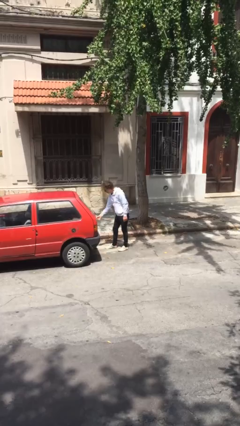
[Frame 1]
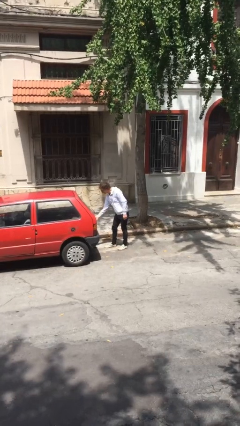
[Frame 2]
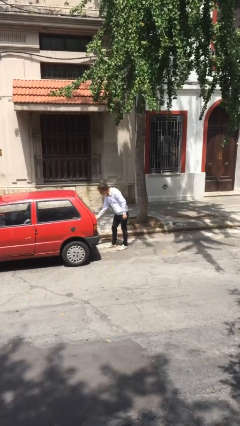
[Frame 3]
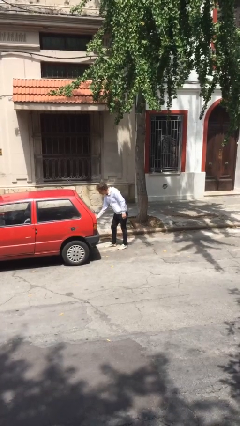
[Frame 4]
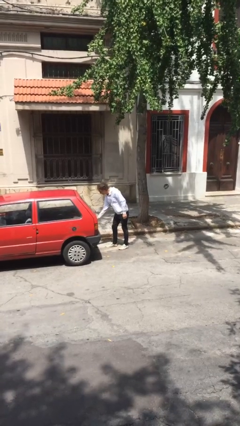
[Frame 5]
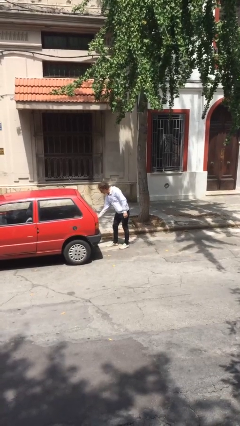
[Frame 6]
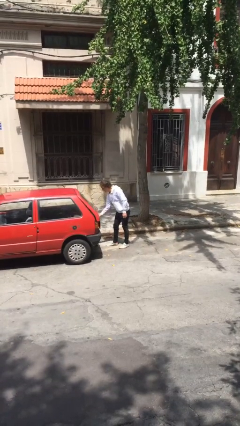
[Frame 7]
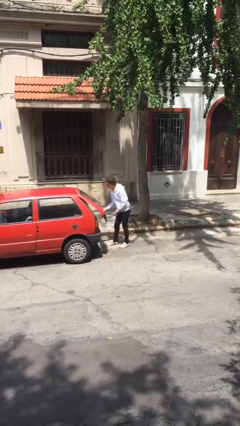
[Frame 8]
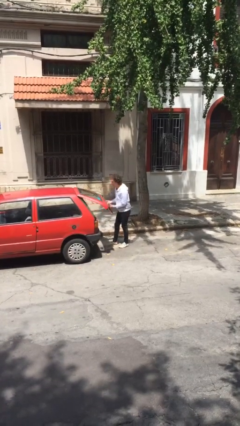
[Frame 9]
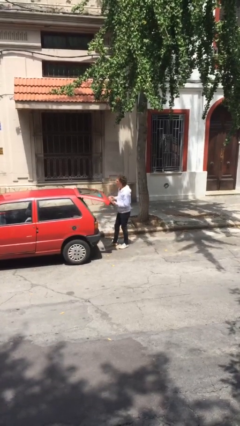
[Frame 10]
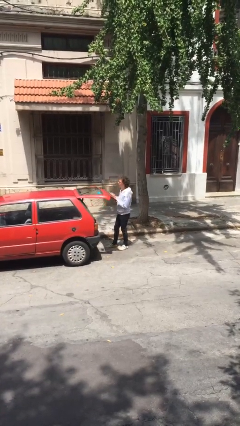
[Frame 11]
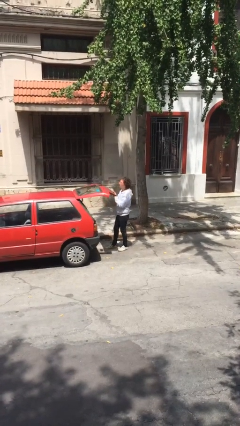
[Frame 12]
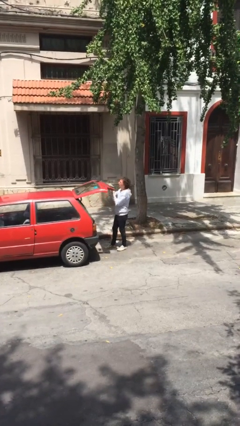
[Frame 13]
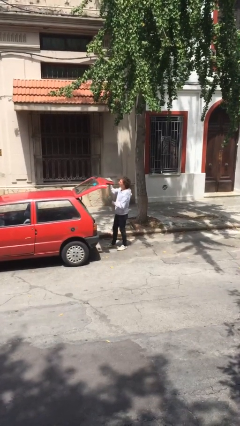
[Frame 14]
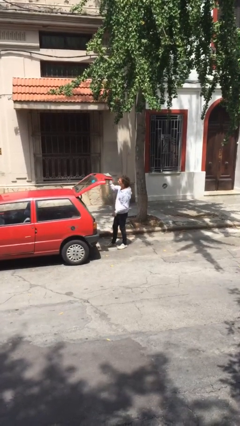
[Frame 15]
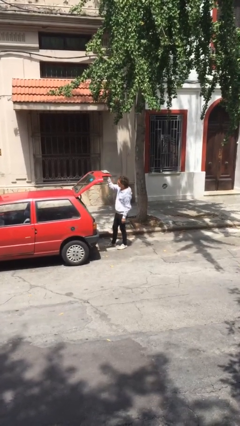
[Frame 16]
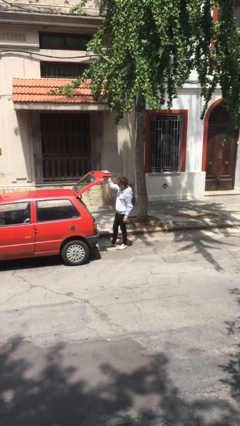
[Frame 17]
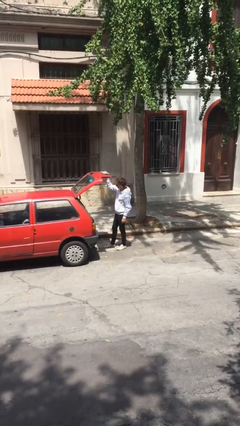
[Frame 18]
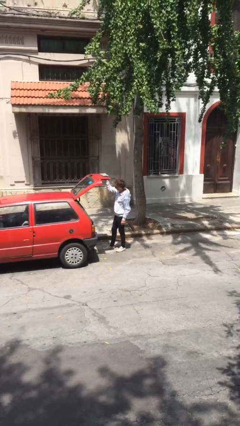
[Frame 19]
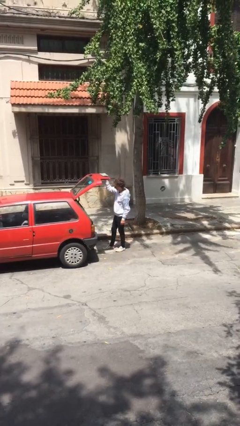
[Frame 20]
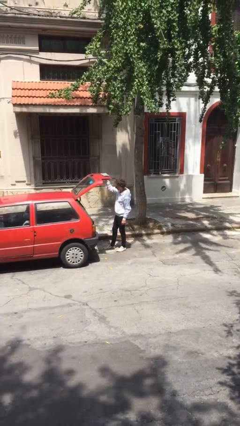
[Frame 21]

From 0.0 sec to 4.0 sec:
person opens car trunk

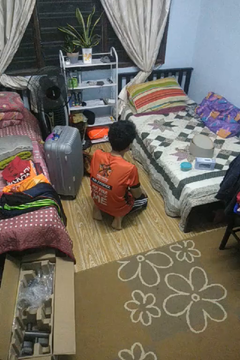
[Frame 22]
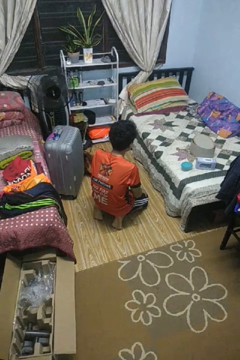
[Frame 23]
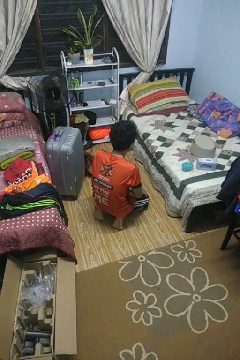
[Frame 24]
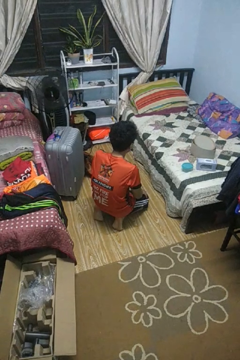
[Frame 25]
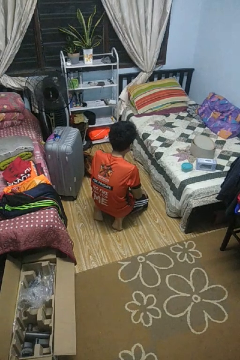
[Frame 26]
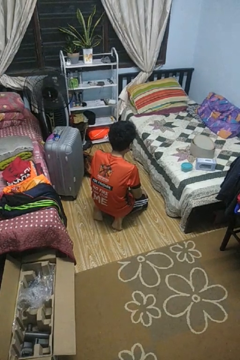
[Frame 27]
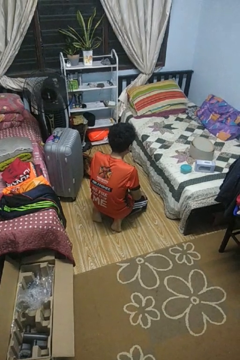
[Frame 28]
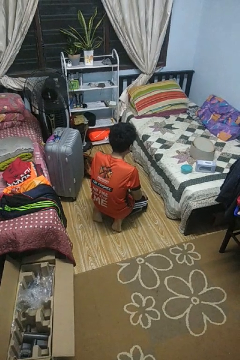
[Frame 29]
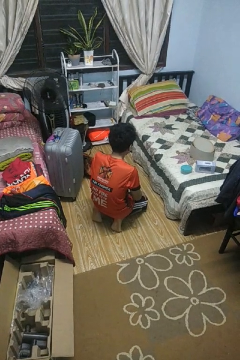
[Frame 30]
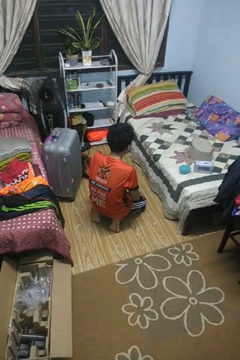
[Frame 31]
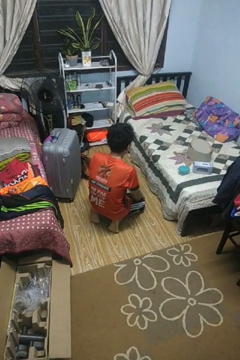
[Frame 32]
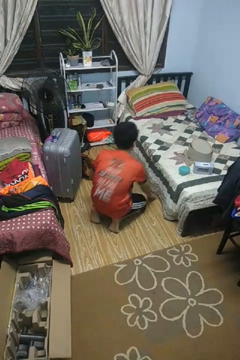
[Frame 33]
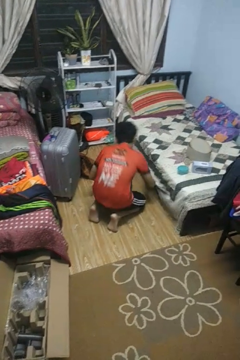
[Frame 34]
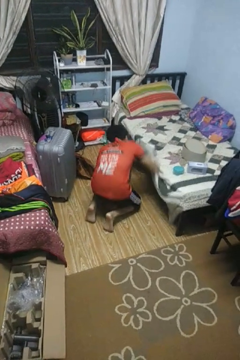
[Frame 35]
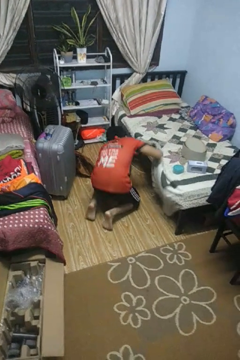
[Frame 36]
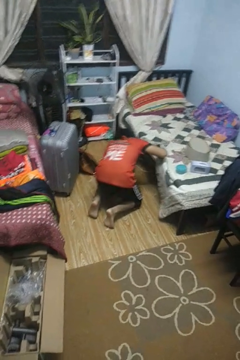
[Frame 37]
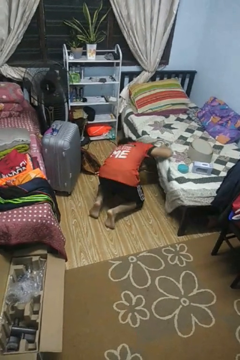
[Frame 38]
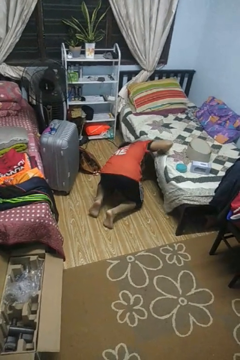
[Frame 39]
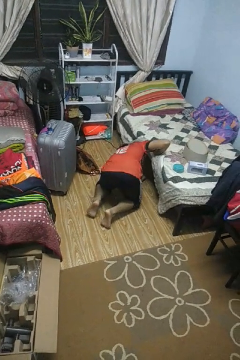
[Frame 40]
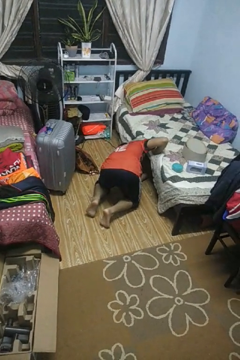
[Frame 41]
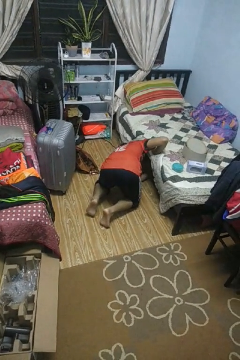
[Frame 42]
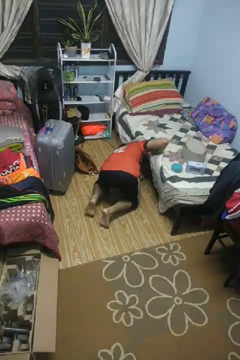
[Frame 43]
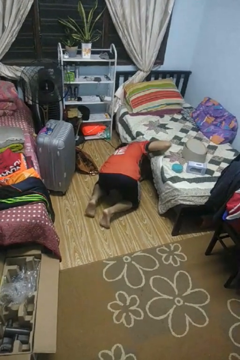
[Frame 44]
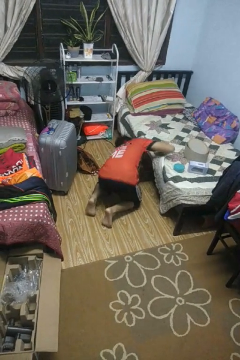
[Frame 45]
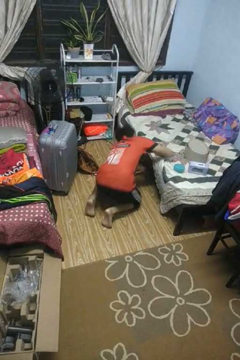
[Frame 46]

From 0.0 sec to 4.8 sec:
person searches under bed

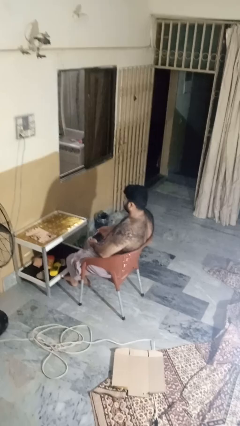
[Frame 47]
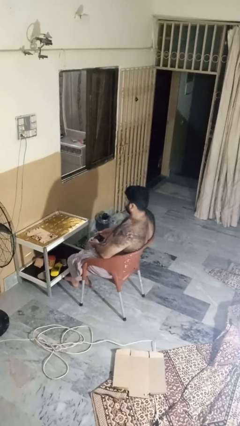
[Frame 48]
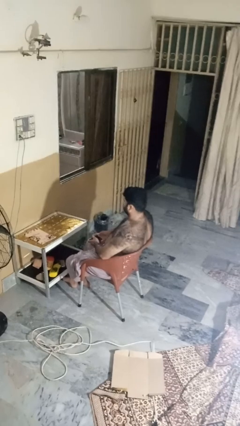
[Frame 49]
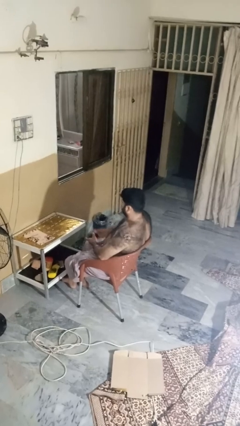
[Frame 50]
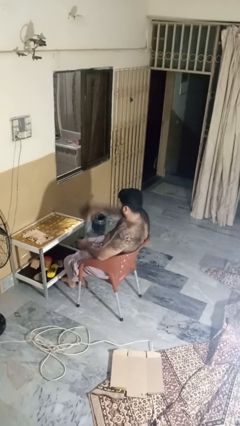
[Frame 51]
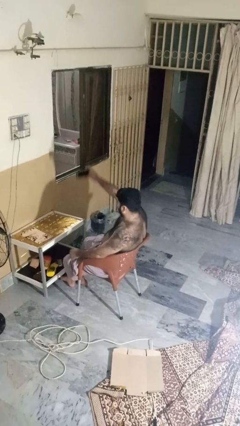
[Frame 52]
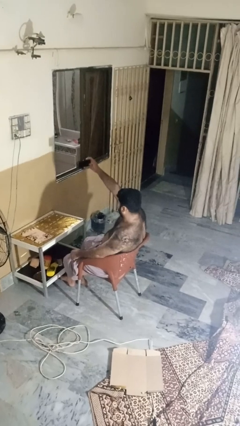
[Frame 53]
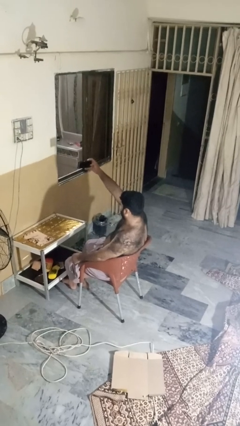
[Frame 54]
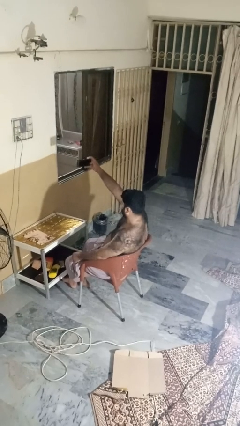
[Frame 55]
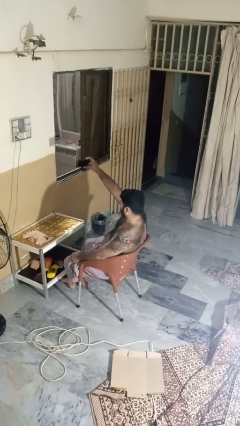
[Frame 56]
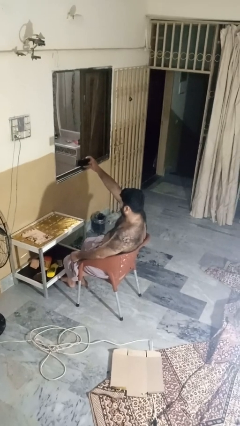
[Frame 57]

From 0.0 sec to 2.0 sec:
person takes selfie

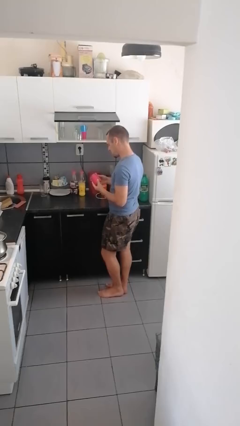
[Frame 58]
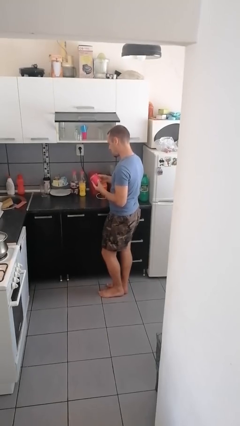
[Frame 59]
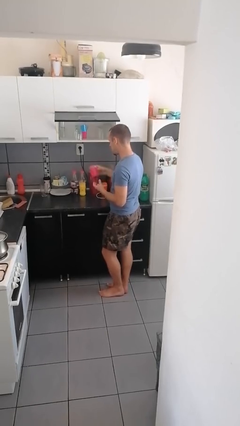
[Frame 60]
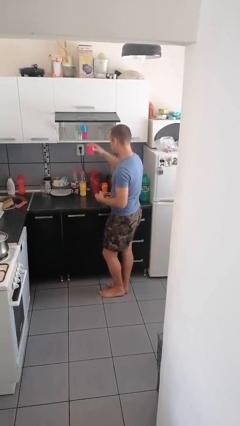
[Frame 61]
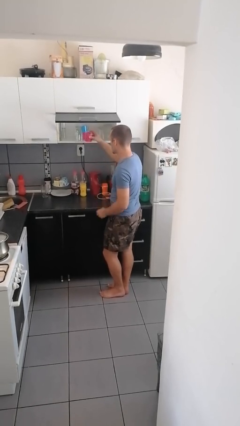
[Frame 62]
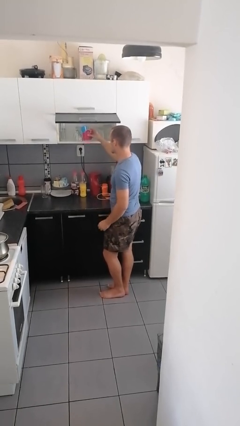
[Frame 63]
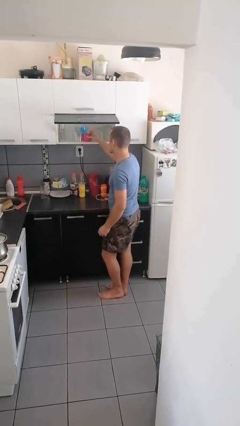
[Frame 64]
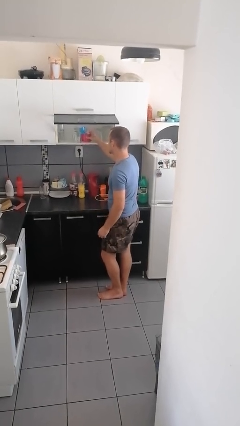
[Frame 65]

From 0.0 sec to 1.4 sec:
person puts down object into cabinet

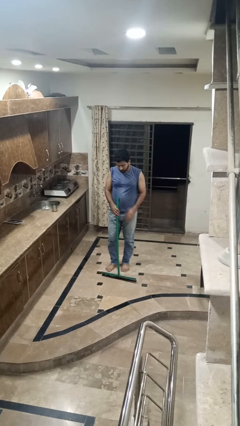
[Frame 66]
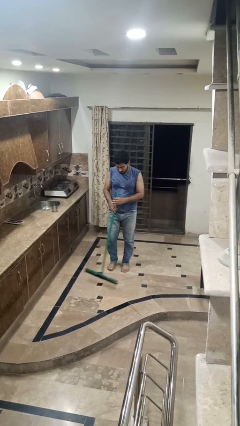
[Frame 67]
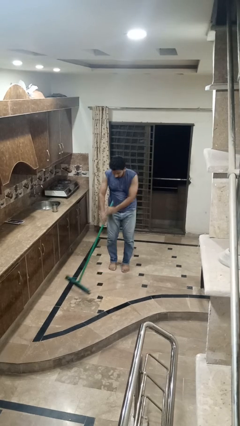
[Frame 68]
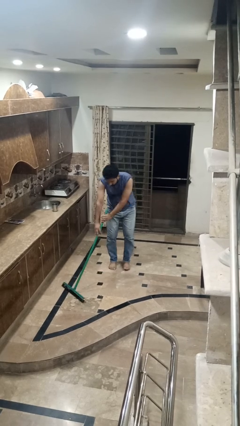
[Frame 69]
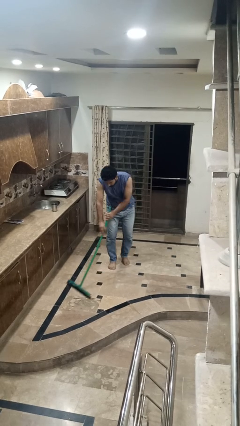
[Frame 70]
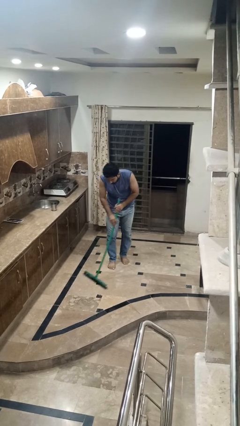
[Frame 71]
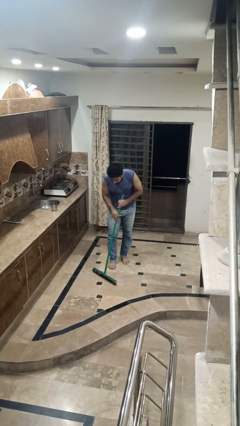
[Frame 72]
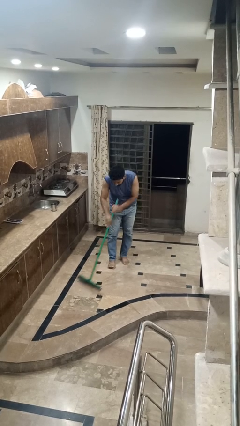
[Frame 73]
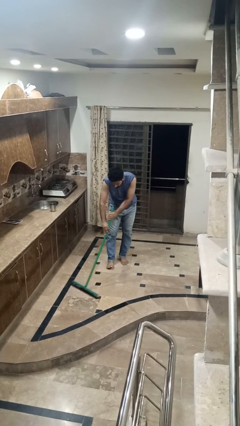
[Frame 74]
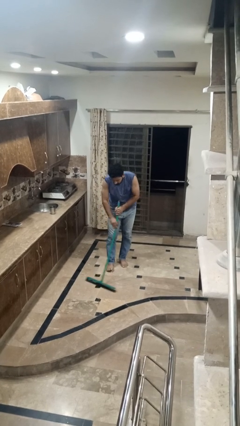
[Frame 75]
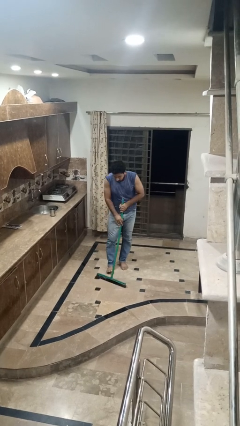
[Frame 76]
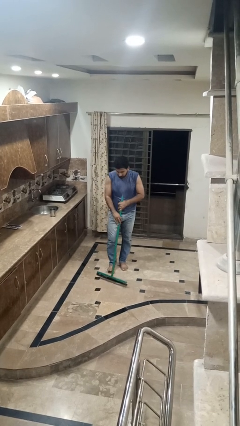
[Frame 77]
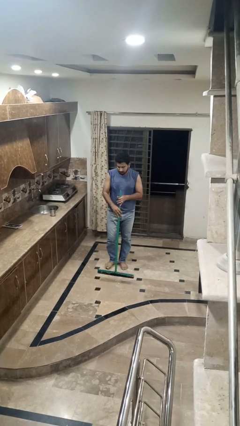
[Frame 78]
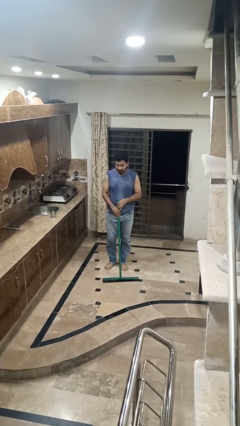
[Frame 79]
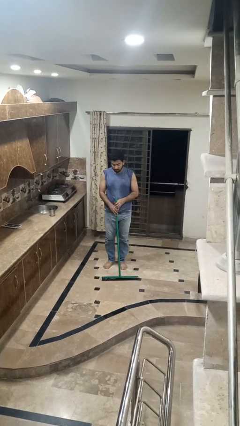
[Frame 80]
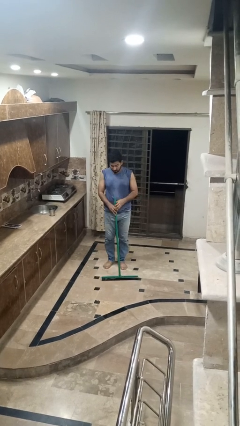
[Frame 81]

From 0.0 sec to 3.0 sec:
person mops

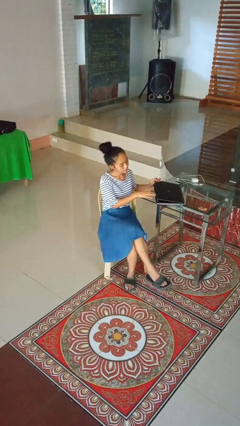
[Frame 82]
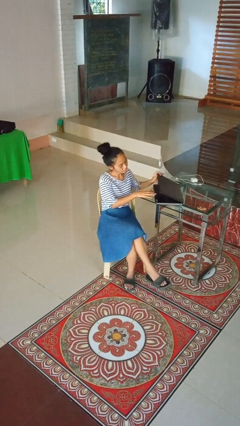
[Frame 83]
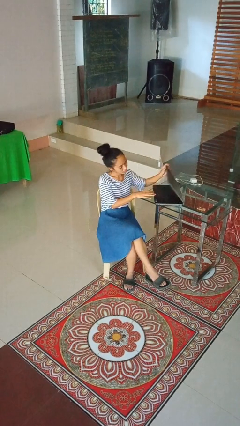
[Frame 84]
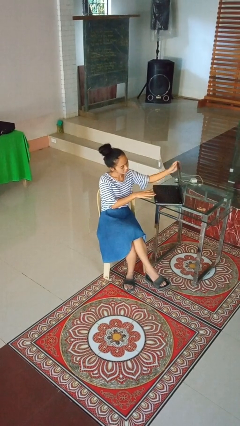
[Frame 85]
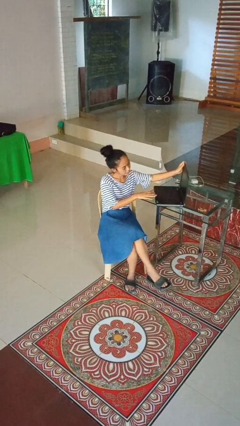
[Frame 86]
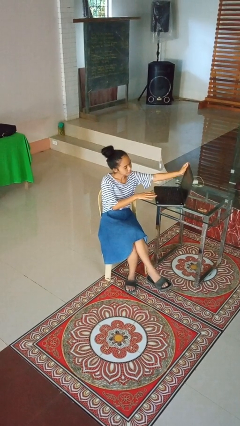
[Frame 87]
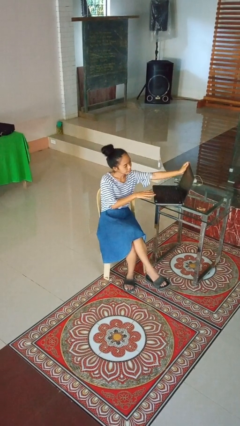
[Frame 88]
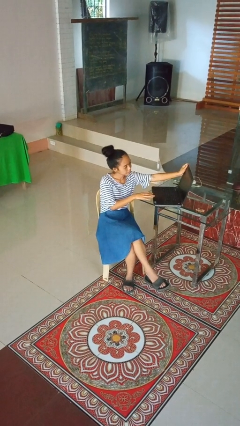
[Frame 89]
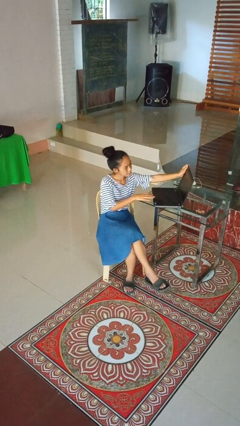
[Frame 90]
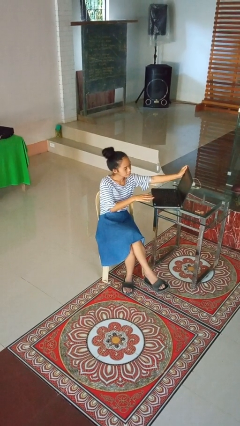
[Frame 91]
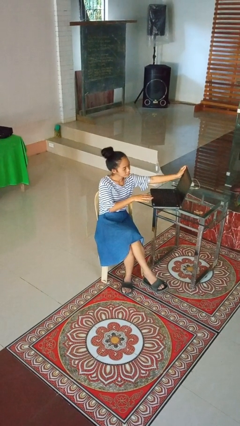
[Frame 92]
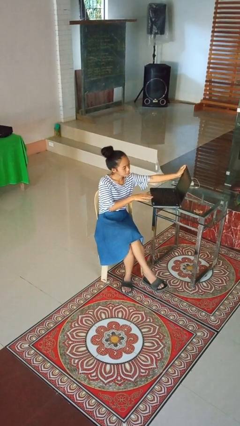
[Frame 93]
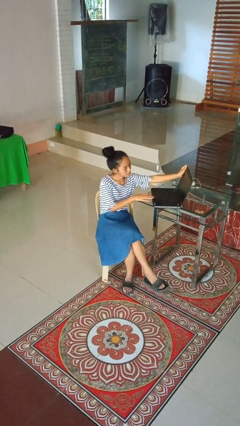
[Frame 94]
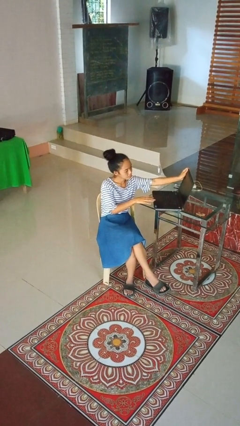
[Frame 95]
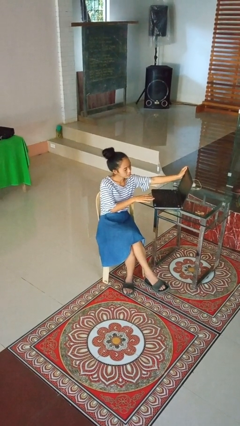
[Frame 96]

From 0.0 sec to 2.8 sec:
person opens laptop

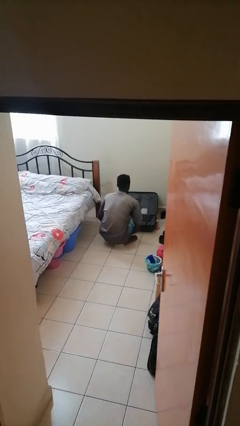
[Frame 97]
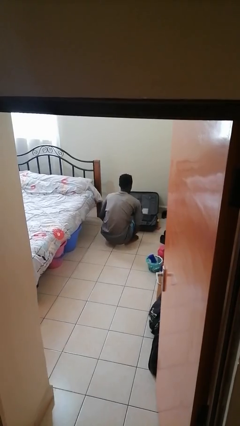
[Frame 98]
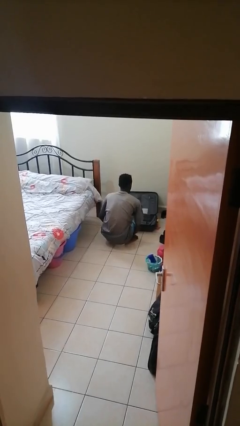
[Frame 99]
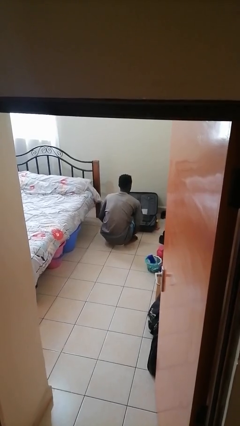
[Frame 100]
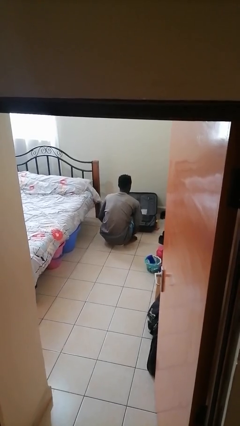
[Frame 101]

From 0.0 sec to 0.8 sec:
person opens suitcase
